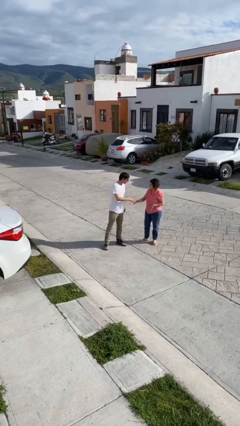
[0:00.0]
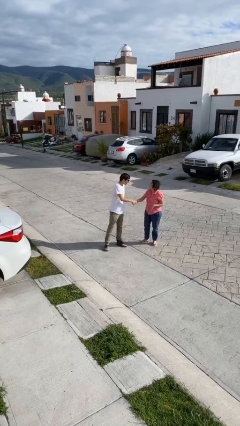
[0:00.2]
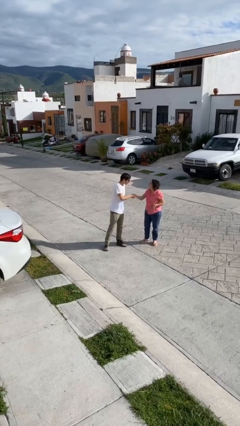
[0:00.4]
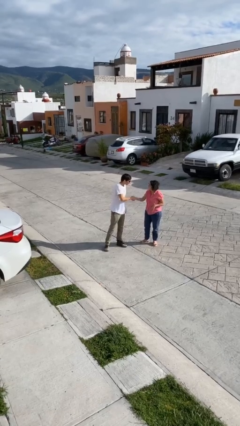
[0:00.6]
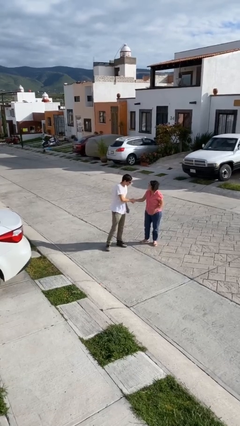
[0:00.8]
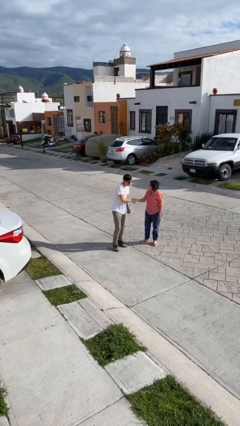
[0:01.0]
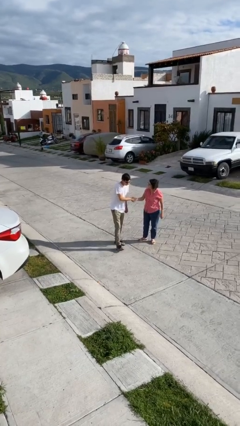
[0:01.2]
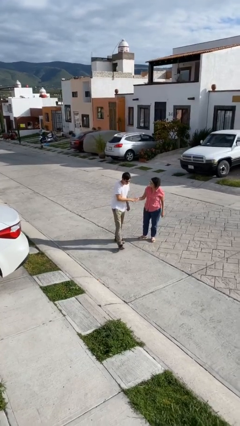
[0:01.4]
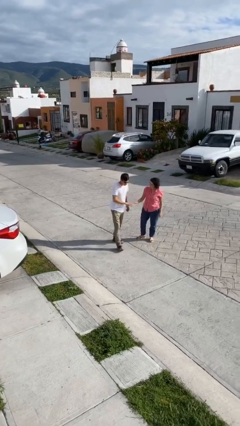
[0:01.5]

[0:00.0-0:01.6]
person shakes hand

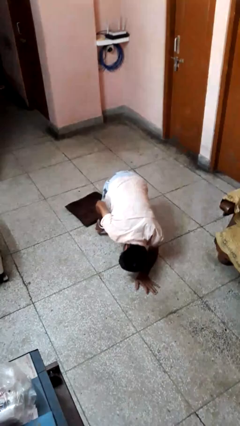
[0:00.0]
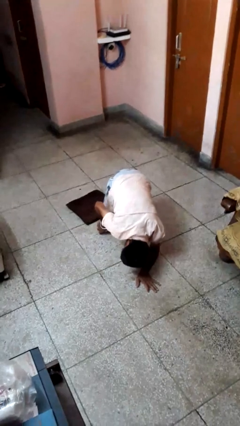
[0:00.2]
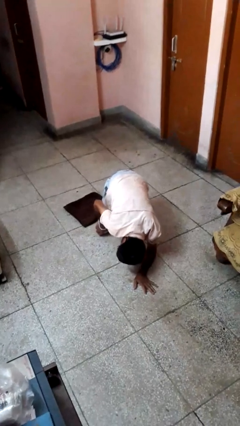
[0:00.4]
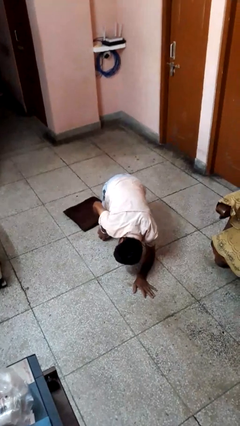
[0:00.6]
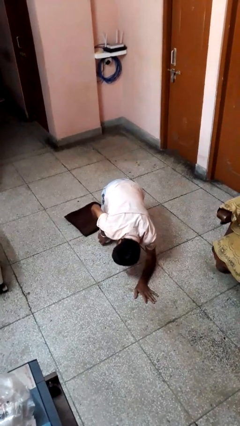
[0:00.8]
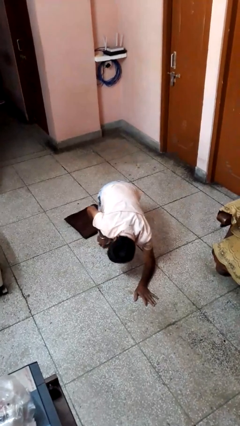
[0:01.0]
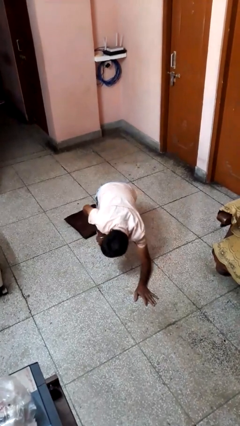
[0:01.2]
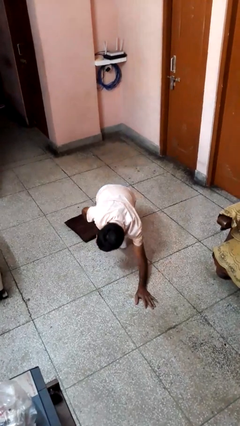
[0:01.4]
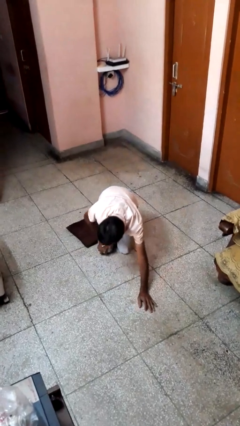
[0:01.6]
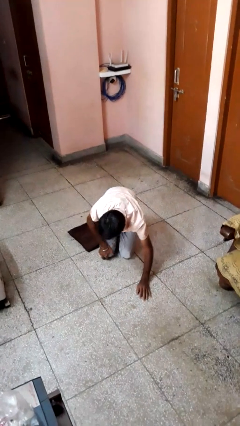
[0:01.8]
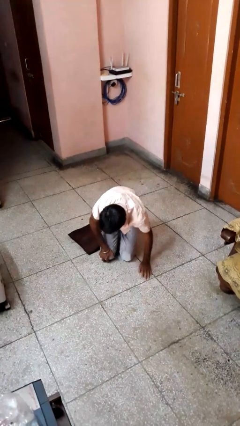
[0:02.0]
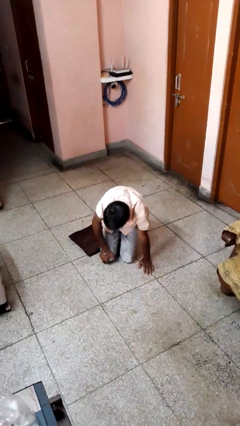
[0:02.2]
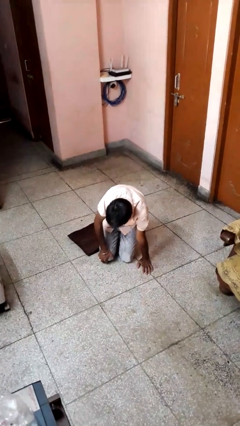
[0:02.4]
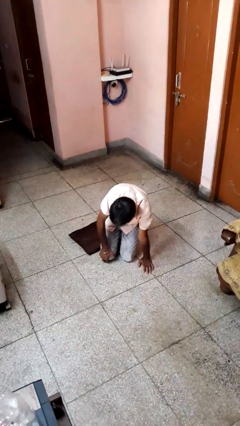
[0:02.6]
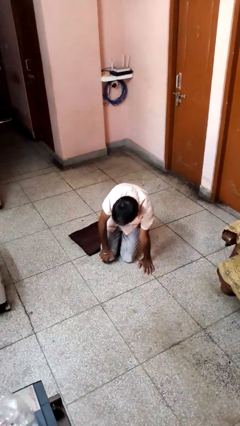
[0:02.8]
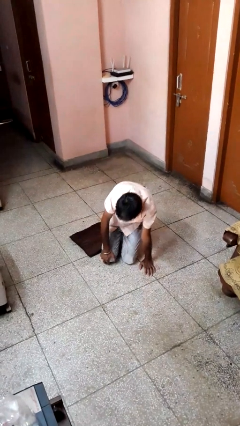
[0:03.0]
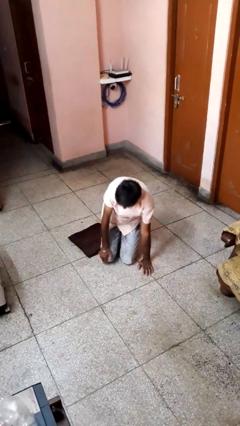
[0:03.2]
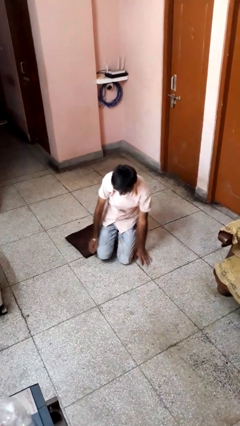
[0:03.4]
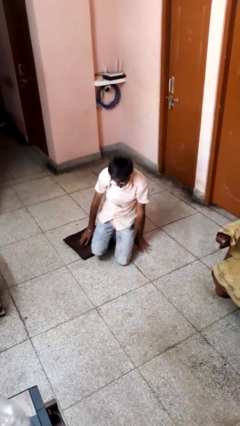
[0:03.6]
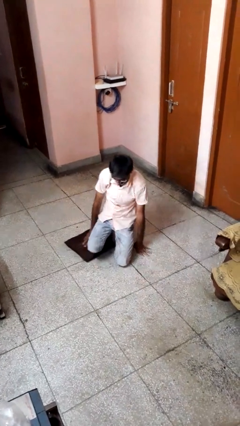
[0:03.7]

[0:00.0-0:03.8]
person lies down on floor

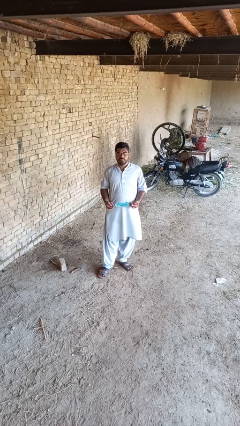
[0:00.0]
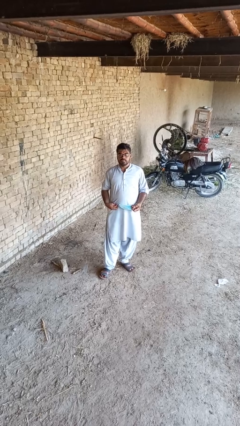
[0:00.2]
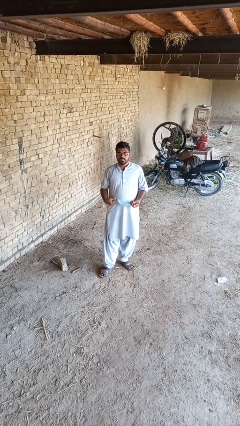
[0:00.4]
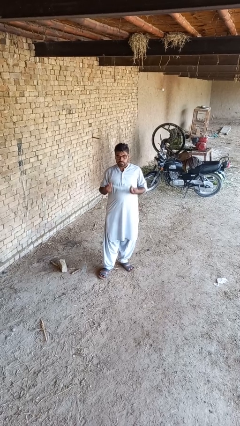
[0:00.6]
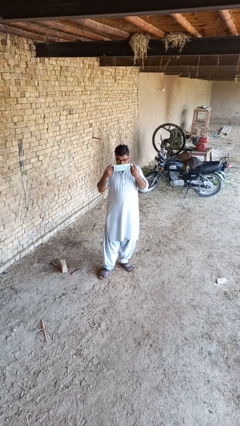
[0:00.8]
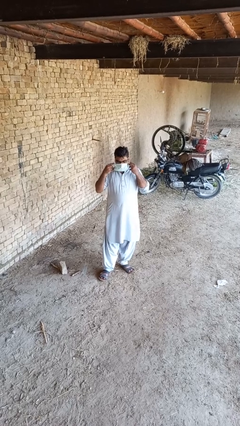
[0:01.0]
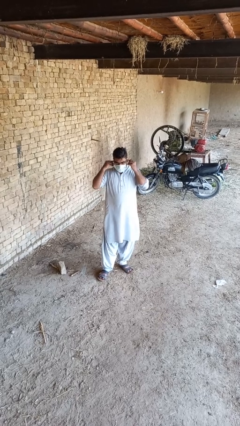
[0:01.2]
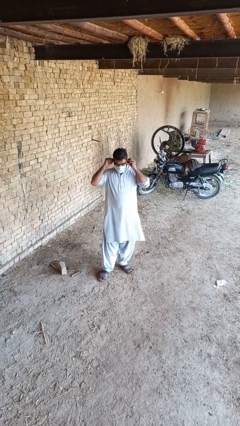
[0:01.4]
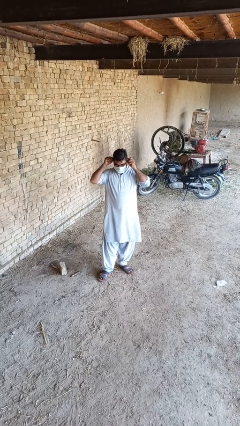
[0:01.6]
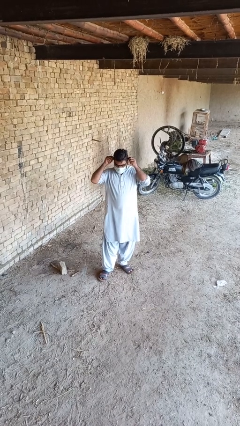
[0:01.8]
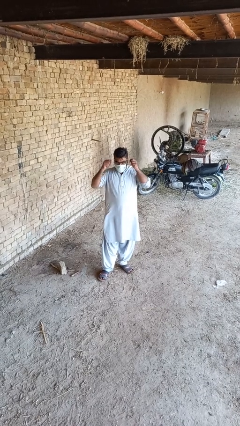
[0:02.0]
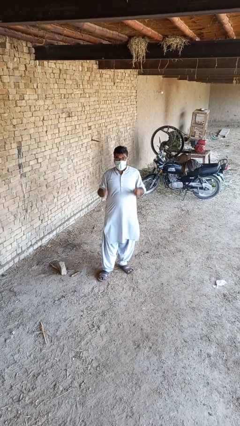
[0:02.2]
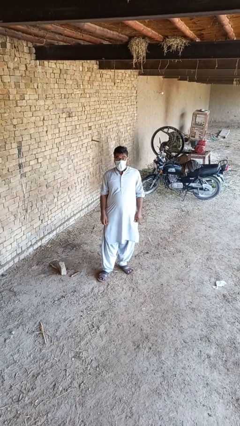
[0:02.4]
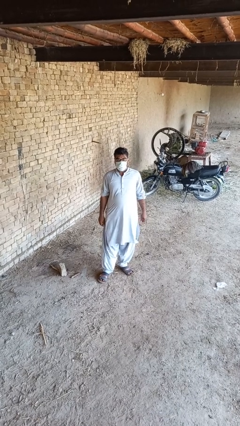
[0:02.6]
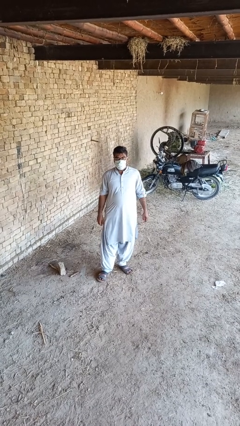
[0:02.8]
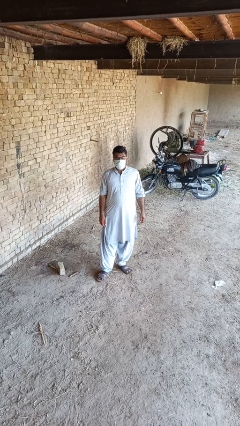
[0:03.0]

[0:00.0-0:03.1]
person puts on facemask

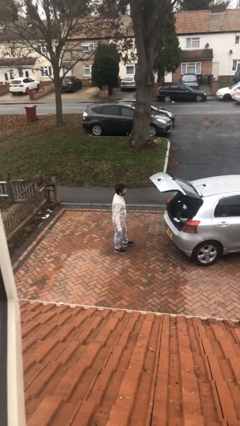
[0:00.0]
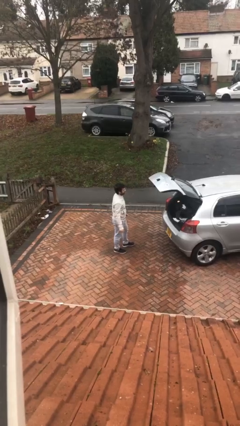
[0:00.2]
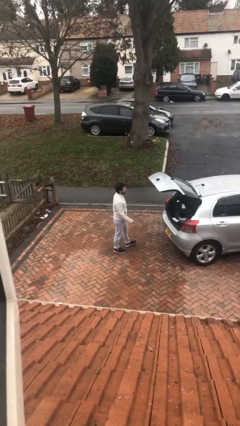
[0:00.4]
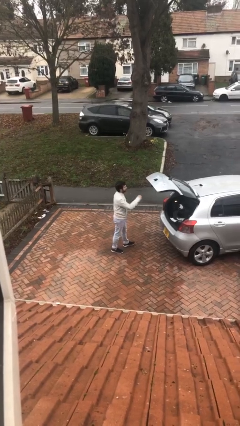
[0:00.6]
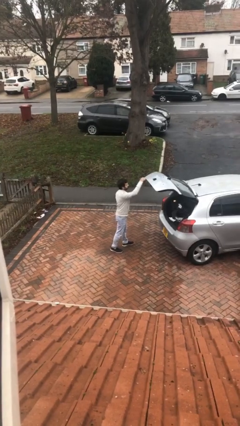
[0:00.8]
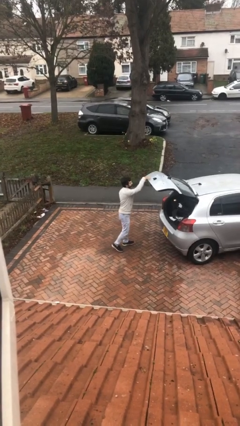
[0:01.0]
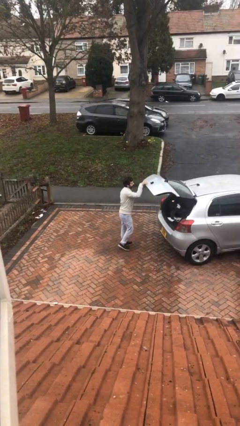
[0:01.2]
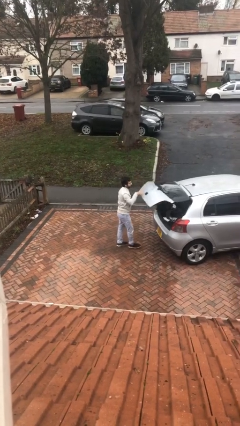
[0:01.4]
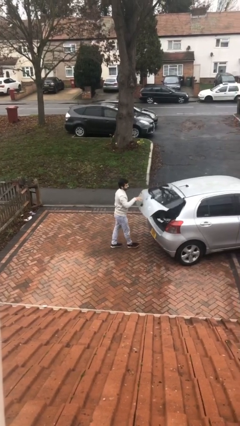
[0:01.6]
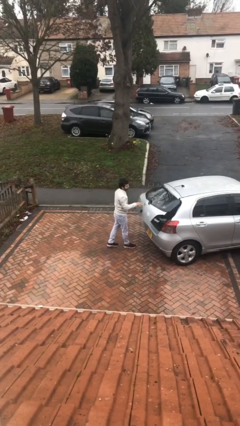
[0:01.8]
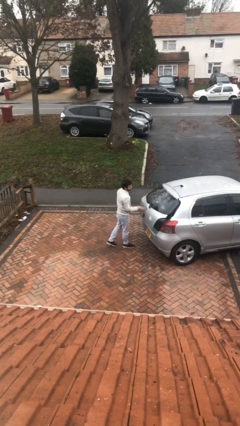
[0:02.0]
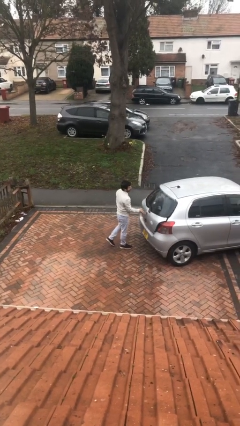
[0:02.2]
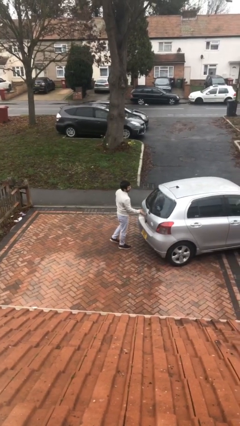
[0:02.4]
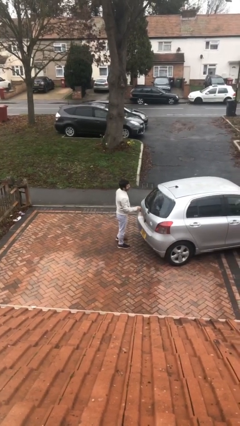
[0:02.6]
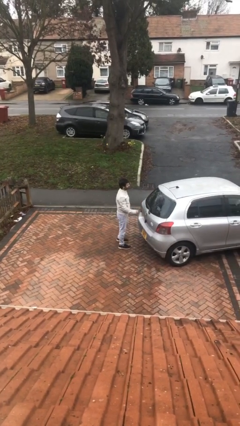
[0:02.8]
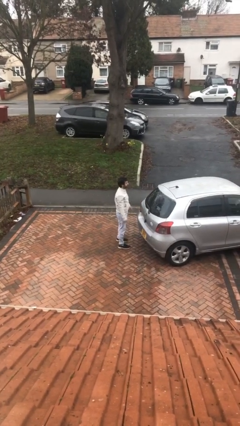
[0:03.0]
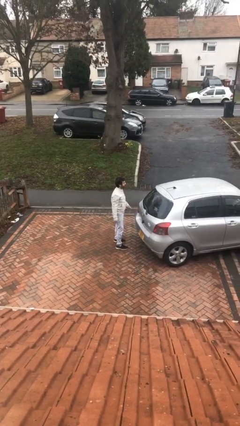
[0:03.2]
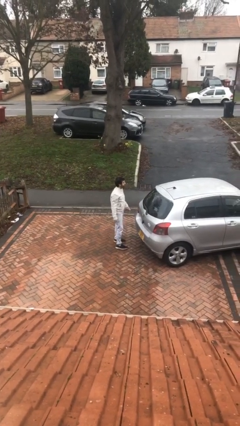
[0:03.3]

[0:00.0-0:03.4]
person closes car trunk

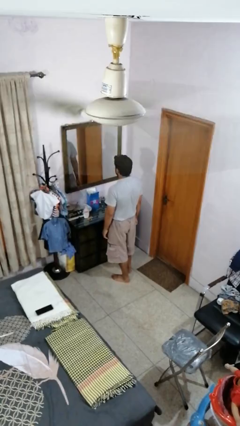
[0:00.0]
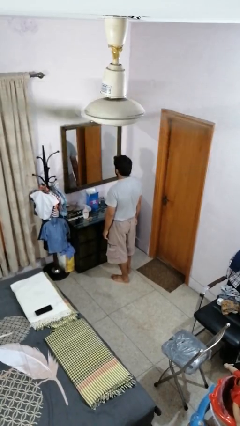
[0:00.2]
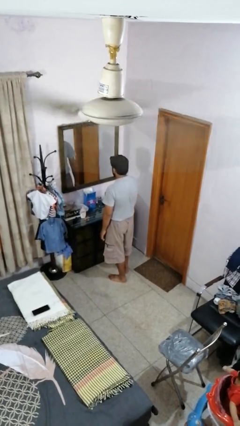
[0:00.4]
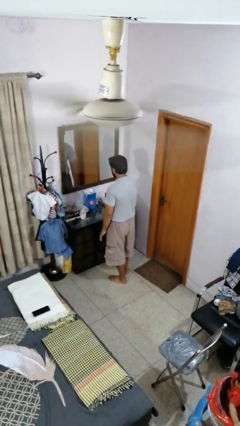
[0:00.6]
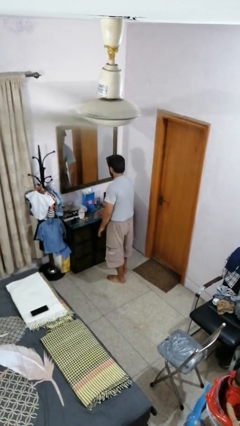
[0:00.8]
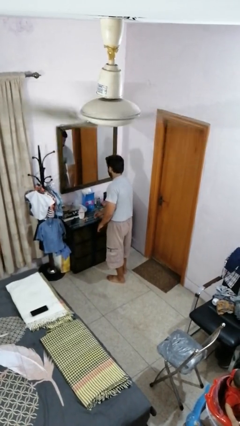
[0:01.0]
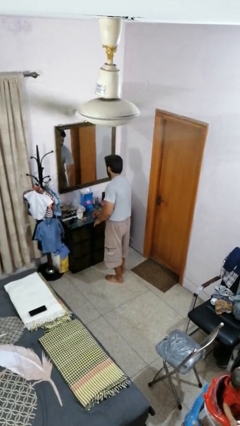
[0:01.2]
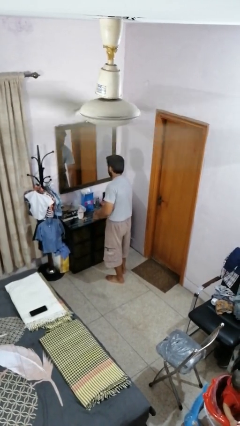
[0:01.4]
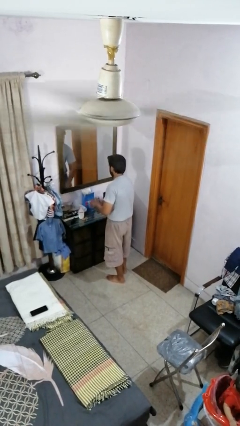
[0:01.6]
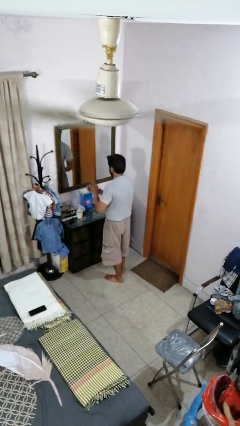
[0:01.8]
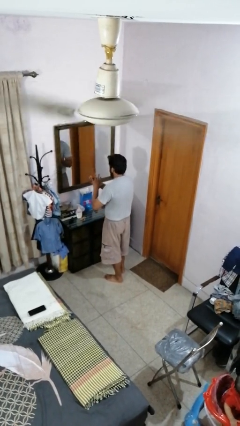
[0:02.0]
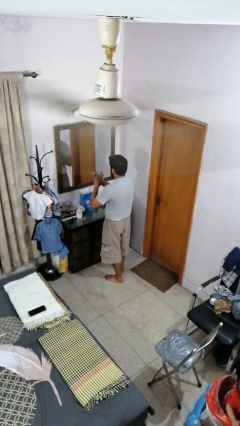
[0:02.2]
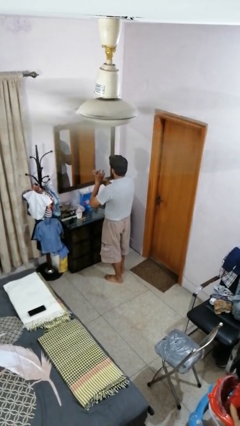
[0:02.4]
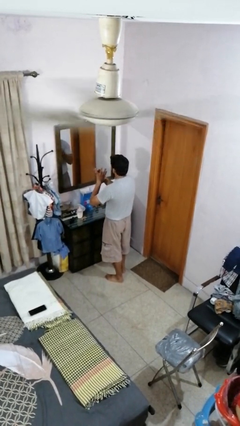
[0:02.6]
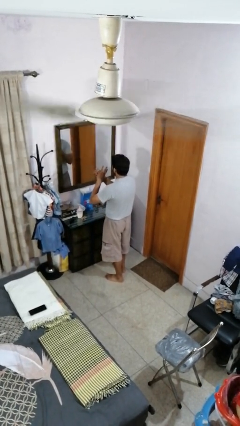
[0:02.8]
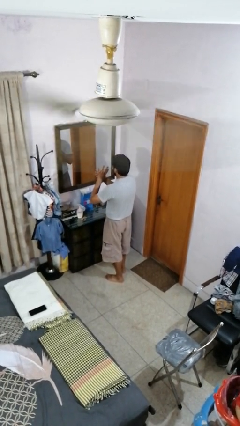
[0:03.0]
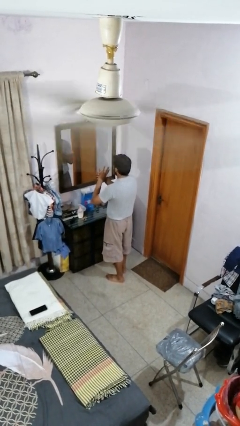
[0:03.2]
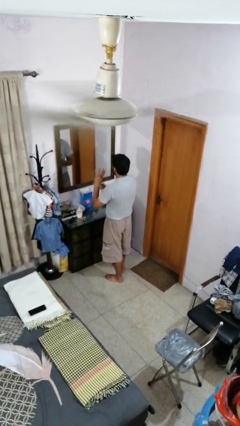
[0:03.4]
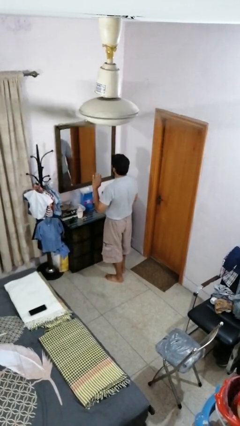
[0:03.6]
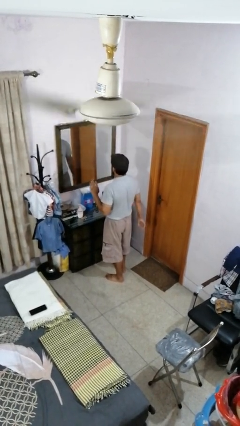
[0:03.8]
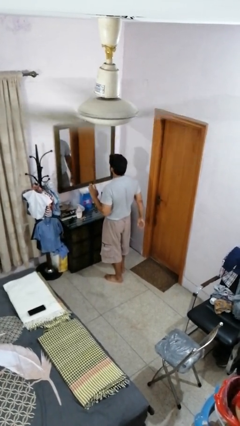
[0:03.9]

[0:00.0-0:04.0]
person puts on ring

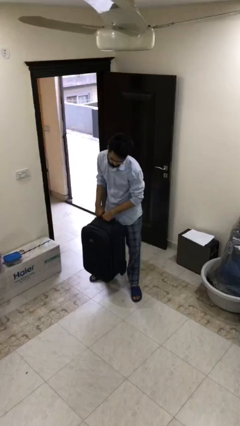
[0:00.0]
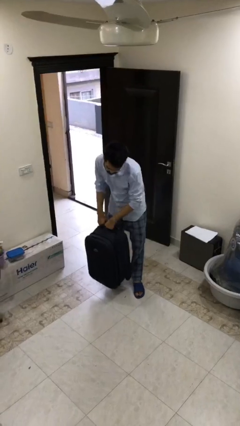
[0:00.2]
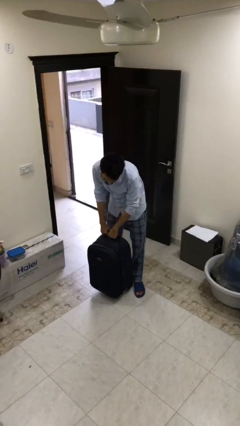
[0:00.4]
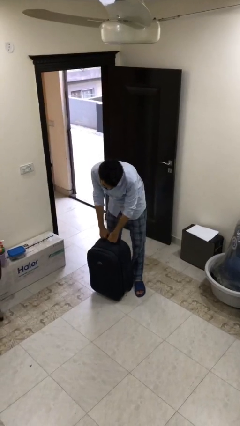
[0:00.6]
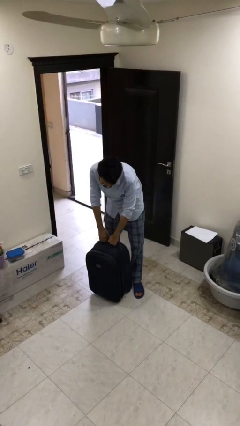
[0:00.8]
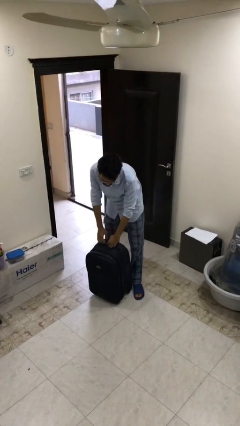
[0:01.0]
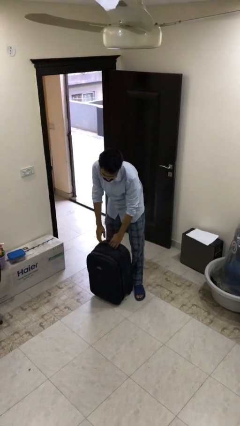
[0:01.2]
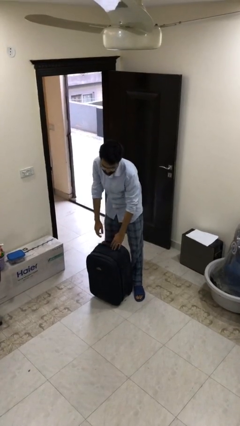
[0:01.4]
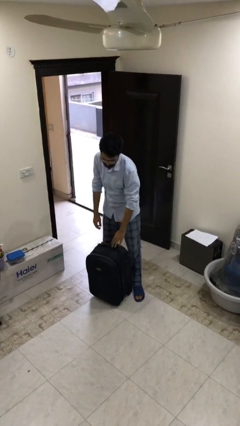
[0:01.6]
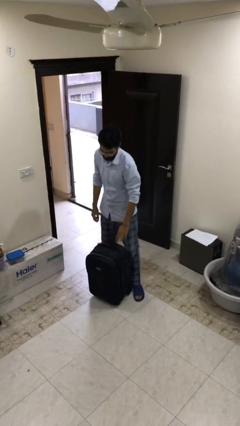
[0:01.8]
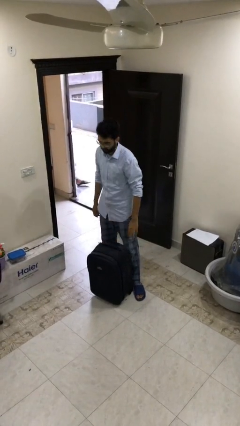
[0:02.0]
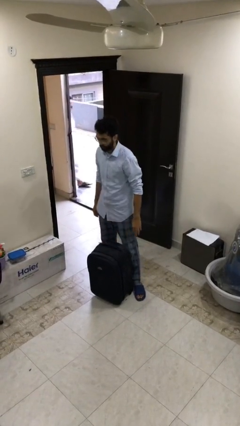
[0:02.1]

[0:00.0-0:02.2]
person puts down object on floor
